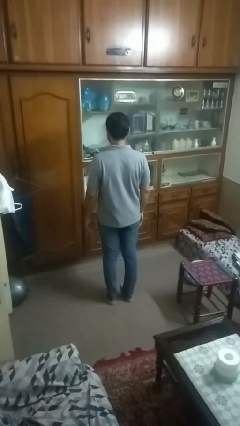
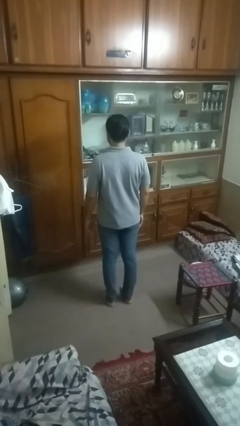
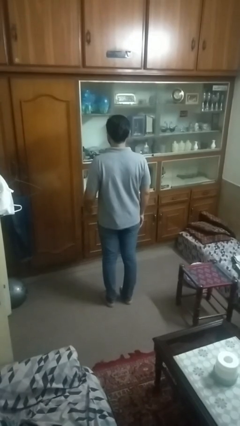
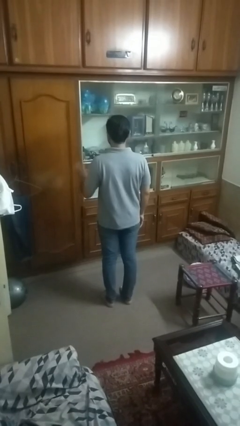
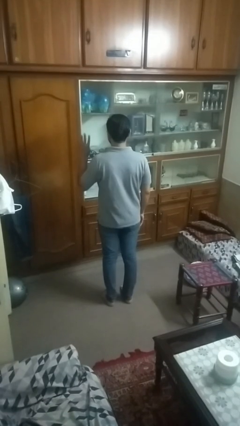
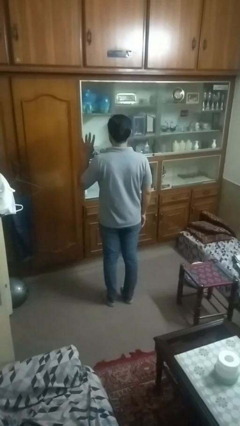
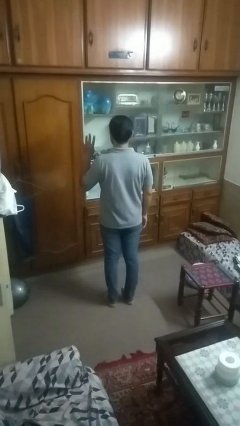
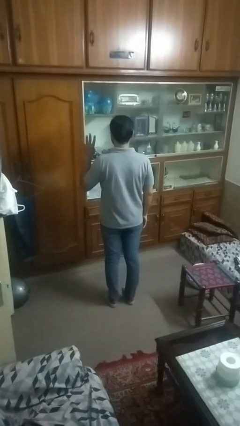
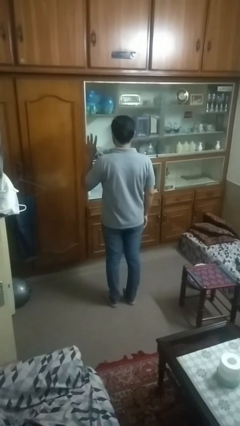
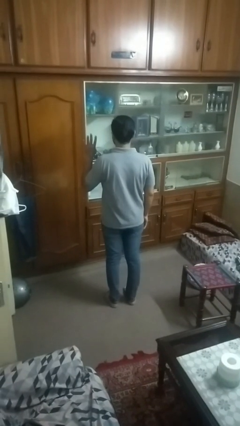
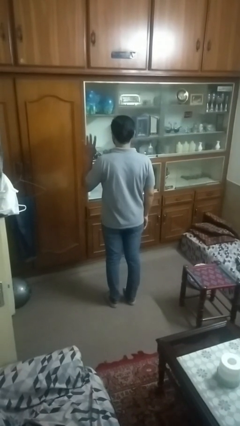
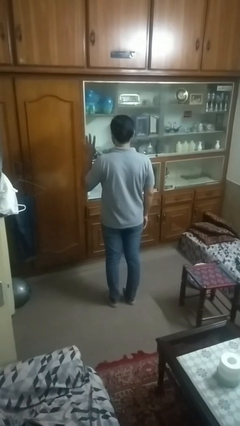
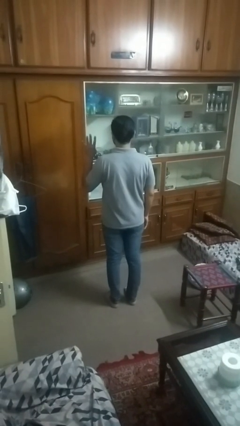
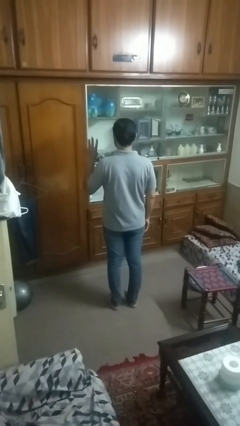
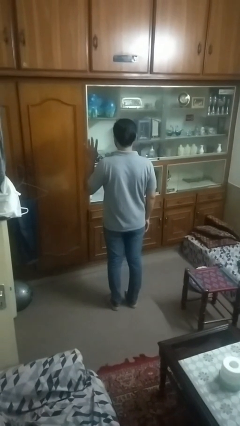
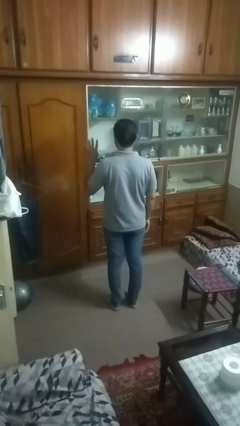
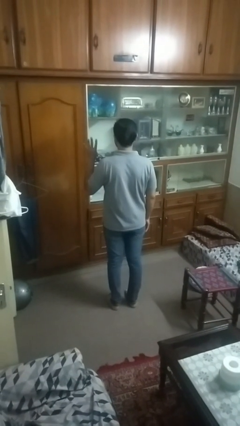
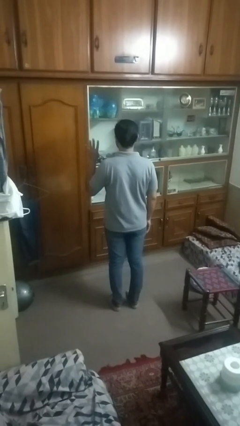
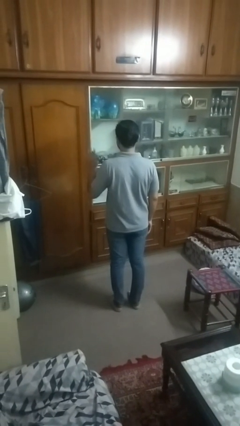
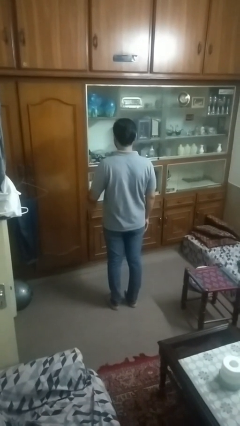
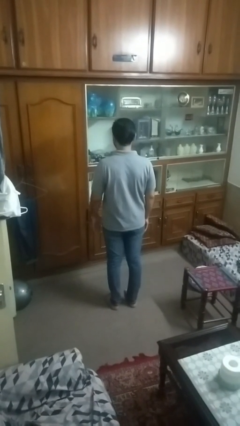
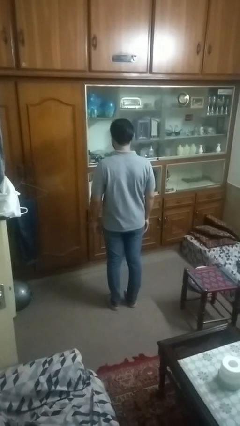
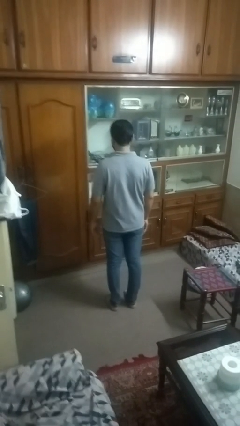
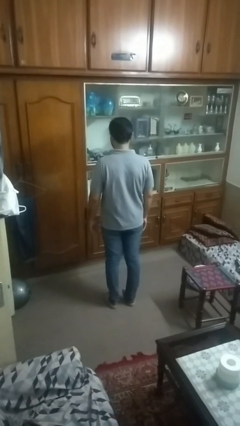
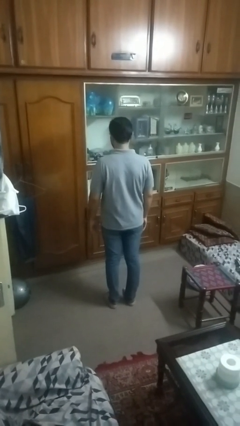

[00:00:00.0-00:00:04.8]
person gestures number four

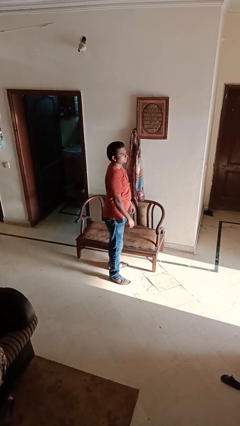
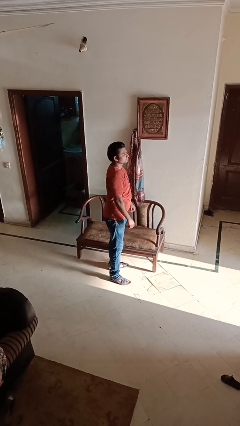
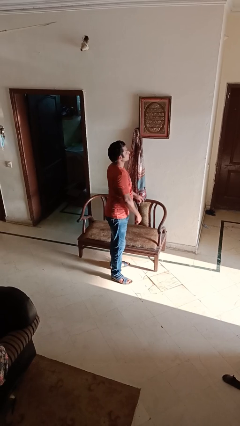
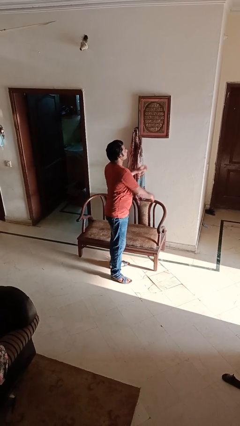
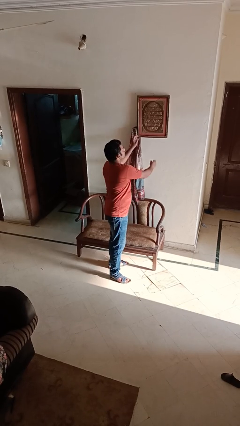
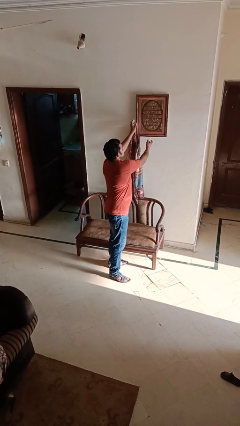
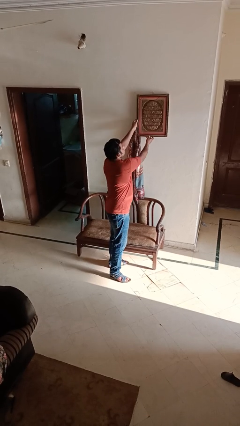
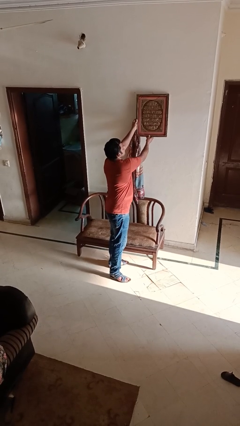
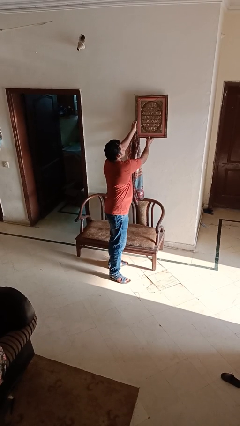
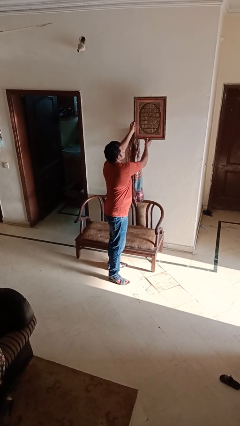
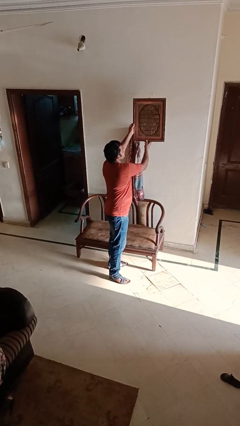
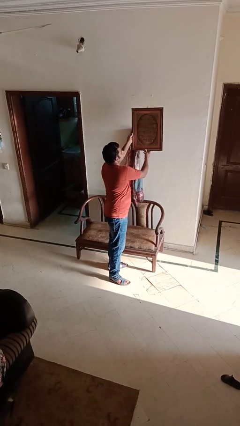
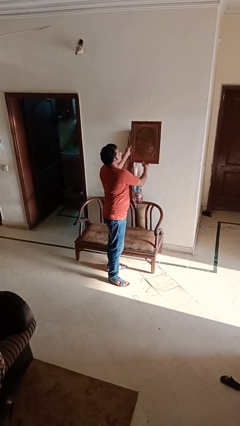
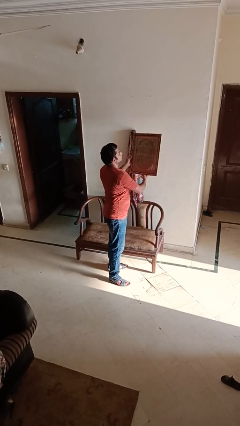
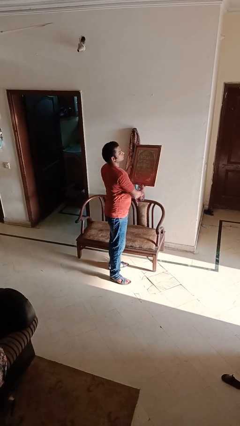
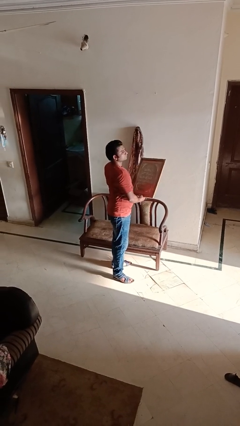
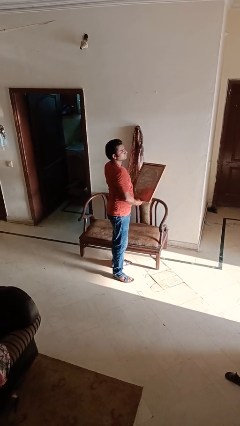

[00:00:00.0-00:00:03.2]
person takes down picture frame

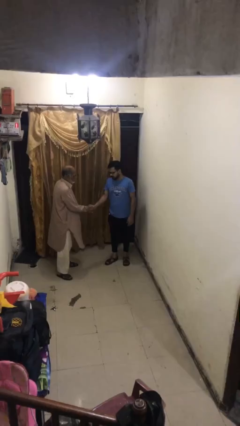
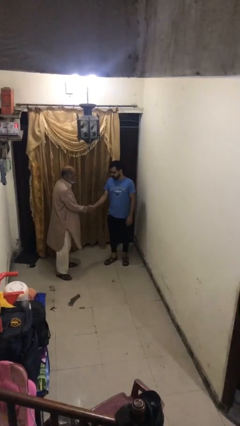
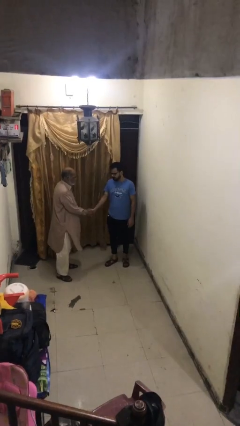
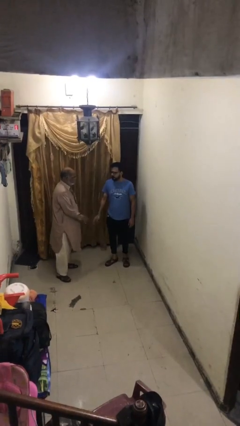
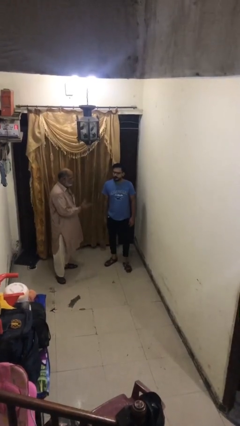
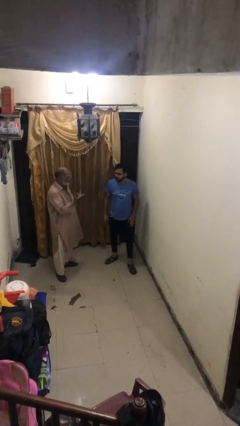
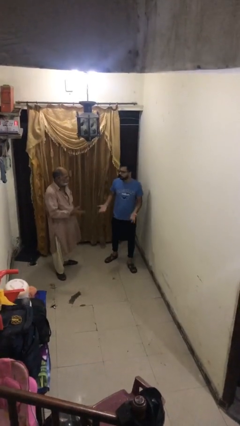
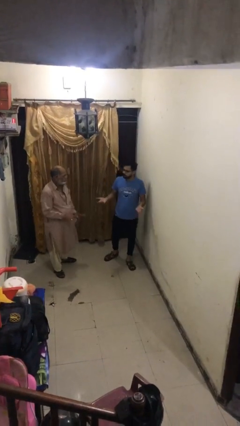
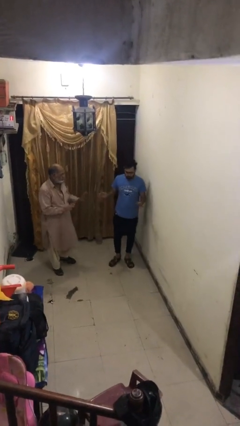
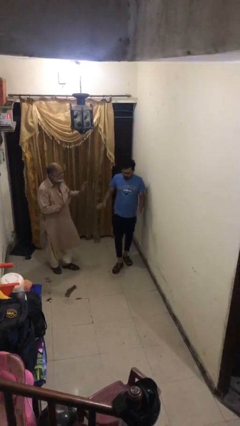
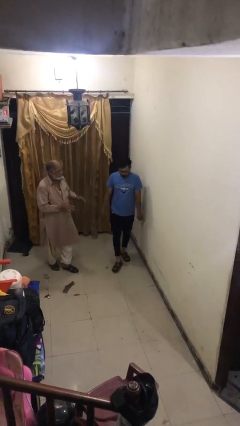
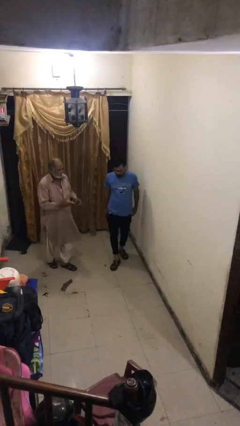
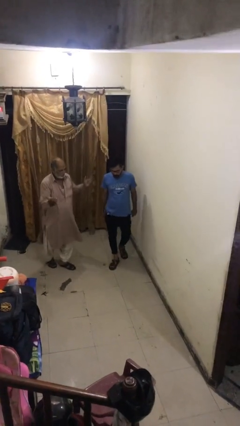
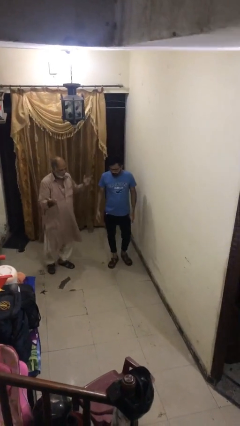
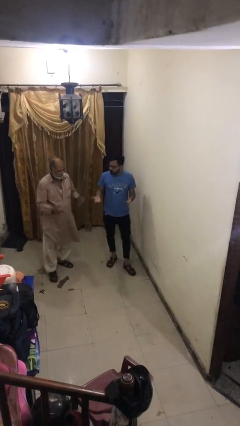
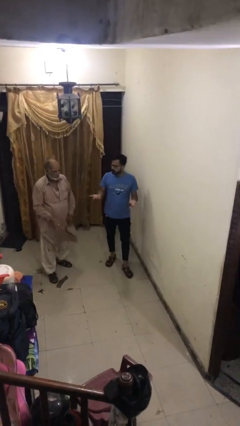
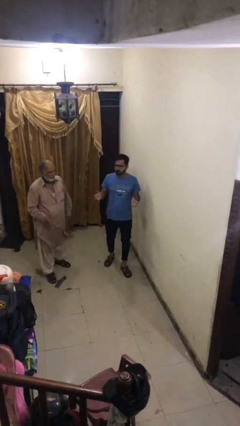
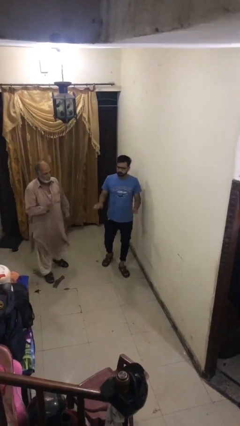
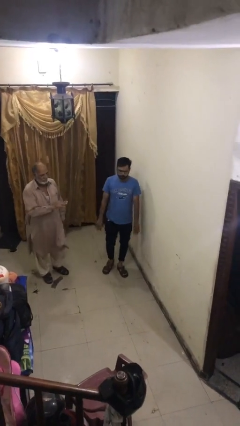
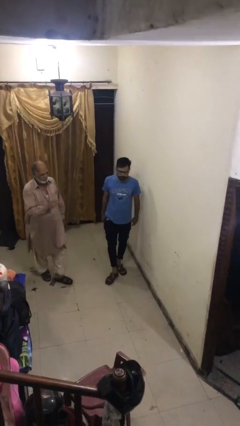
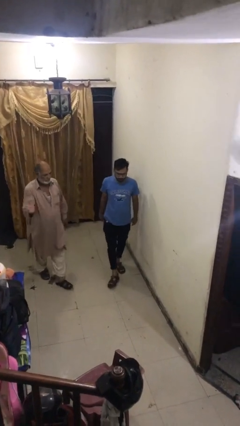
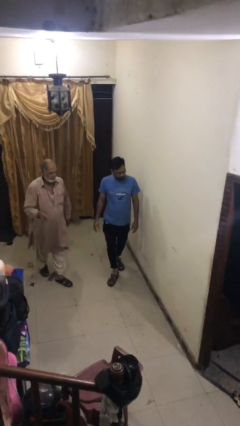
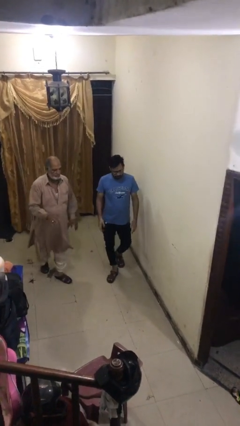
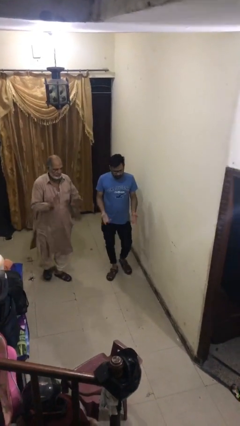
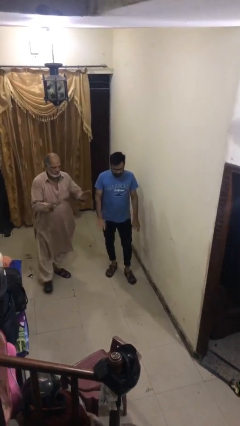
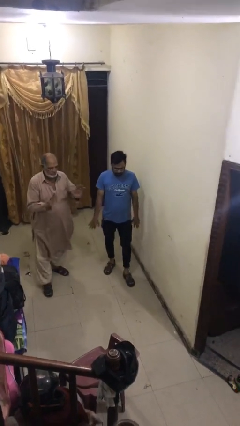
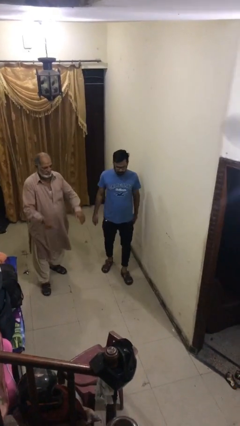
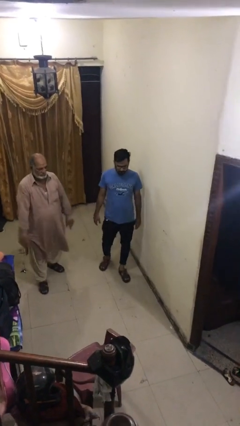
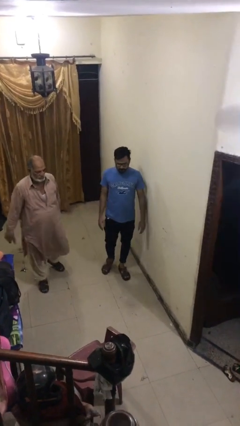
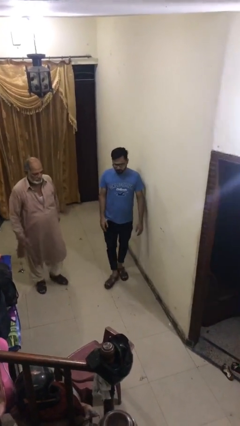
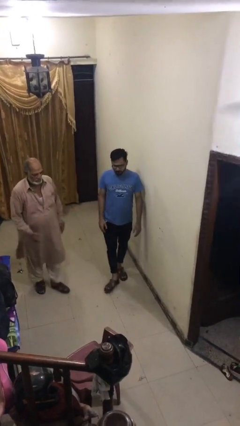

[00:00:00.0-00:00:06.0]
person talks to person

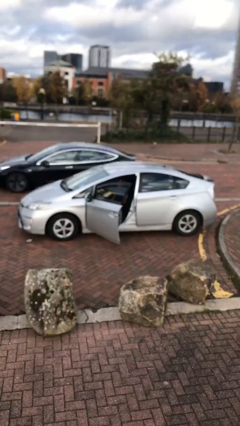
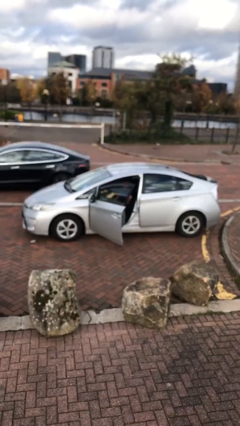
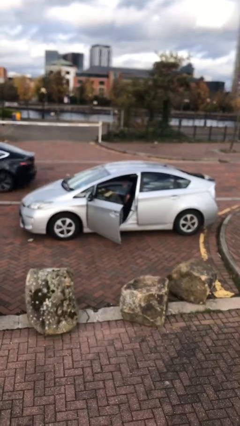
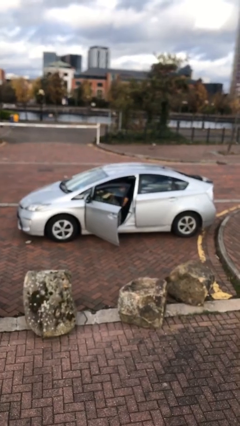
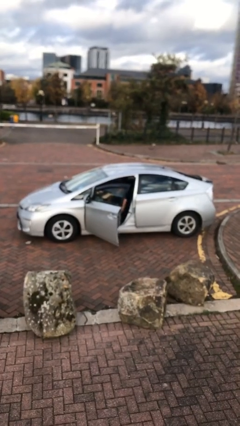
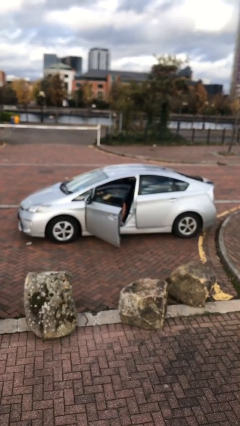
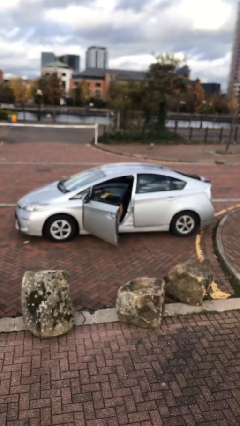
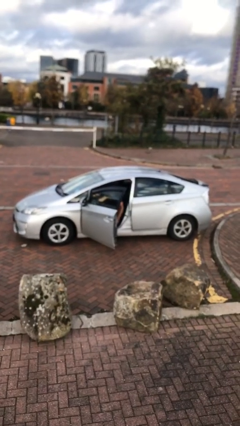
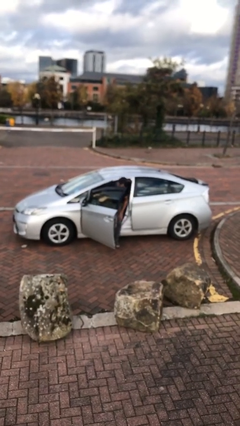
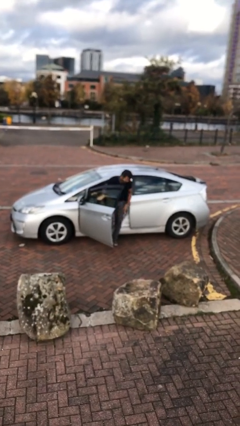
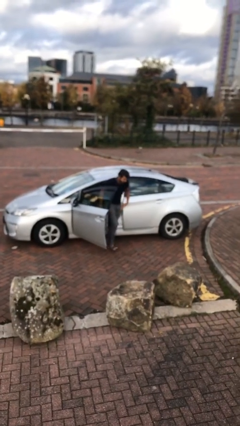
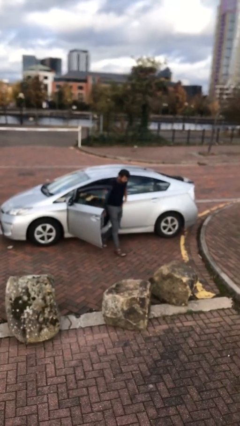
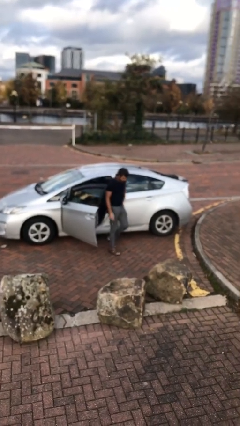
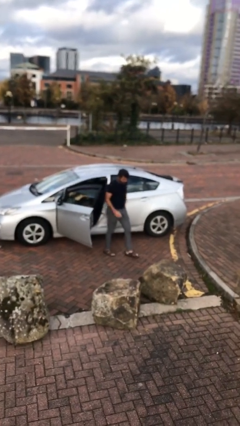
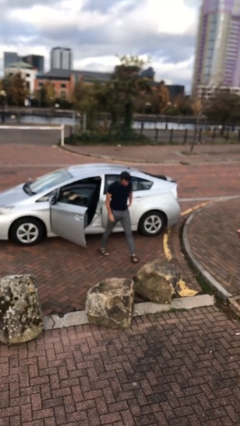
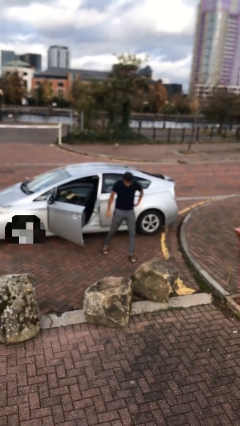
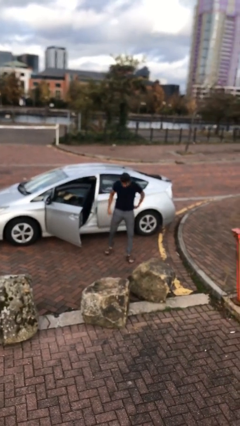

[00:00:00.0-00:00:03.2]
person exits car

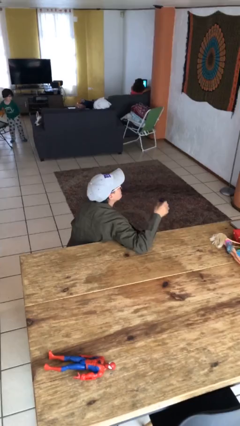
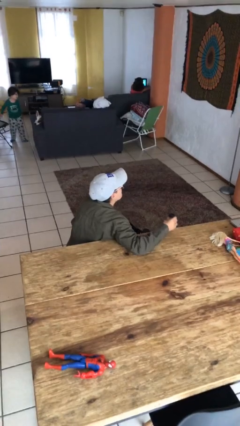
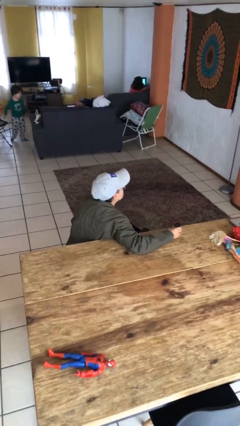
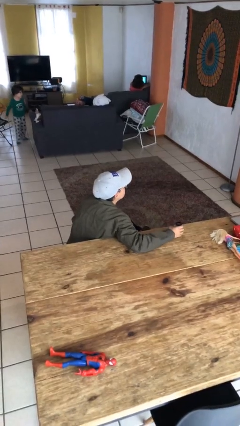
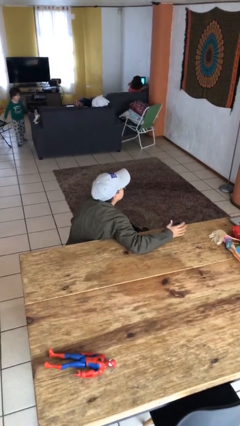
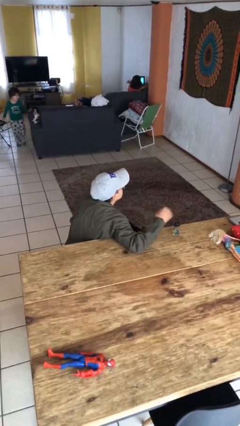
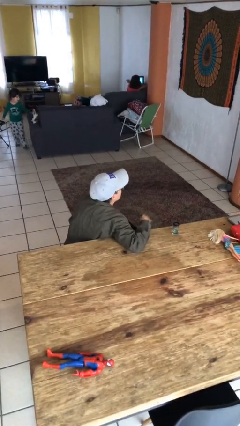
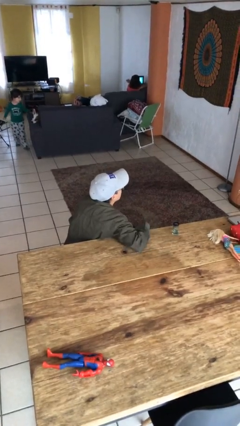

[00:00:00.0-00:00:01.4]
person puts down object on table
